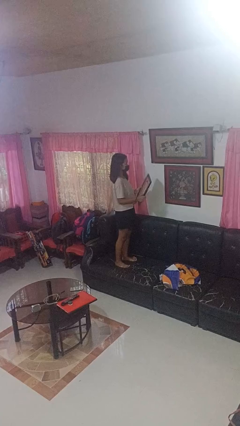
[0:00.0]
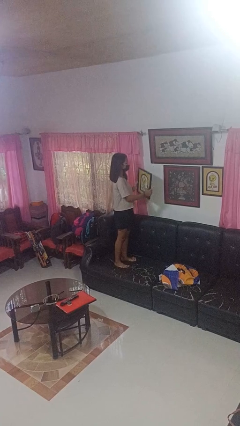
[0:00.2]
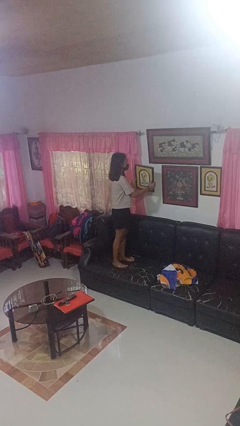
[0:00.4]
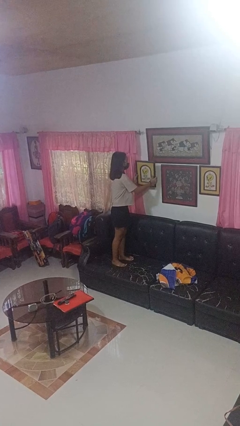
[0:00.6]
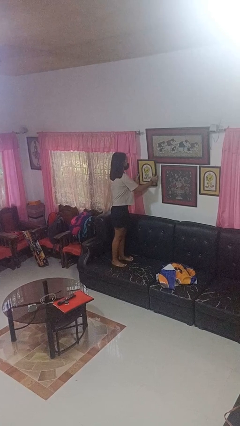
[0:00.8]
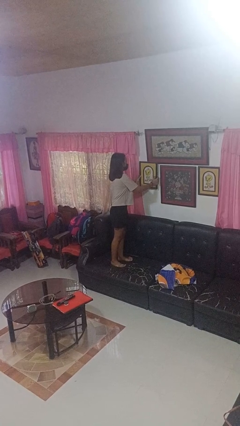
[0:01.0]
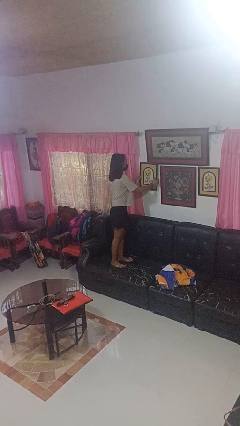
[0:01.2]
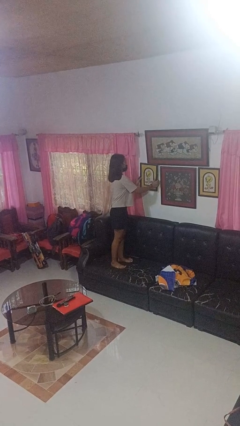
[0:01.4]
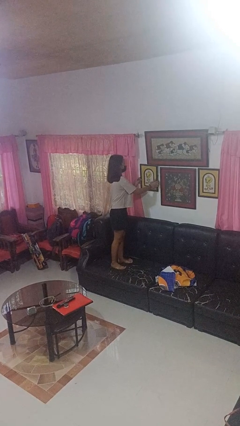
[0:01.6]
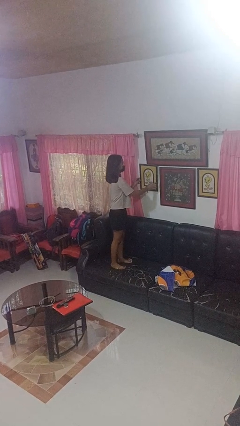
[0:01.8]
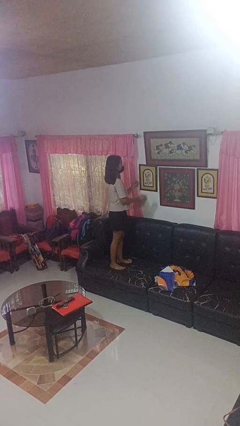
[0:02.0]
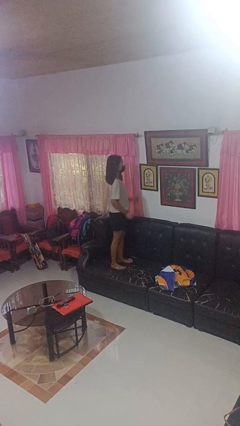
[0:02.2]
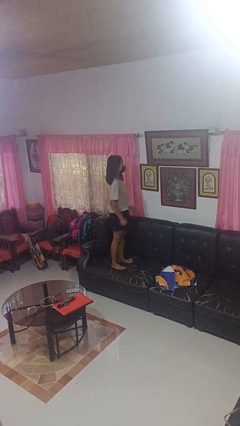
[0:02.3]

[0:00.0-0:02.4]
person puts up picture frame

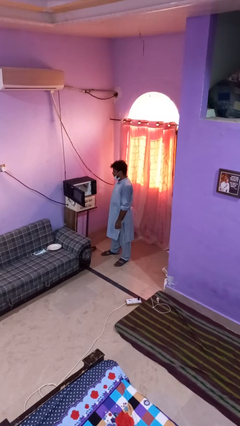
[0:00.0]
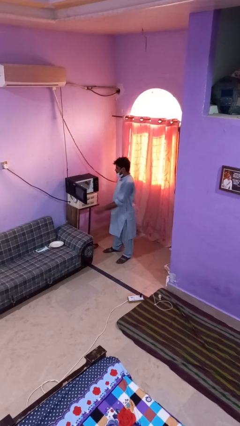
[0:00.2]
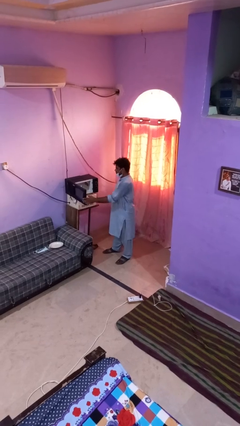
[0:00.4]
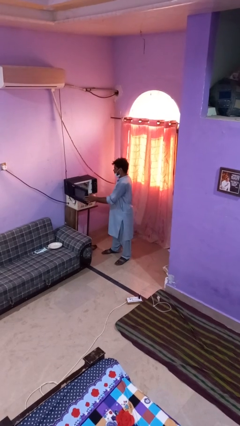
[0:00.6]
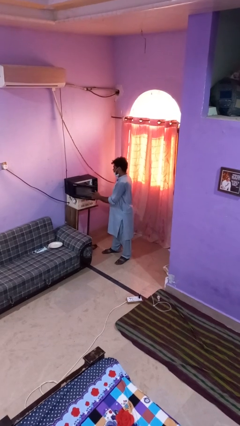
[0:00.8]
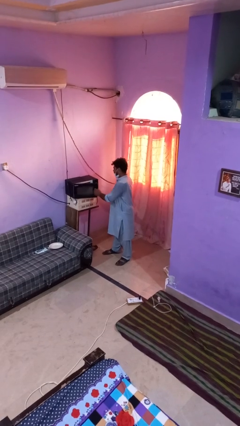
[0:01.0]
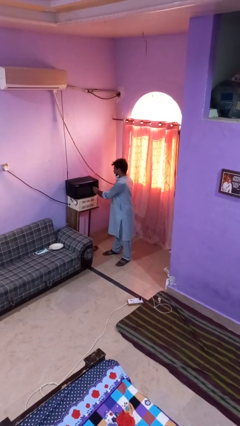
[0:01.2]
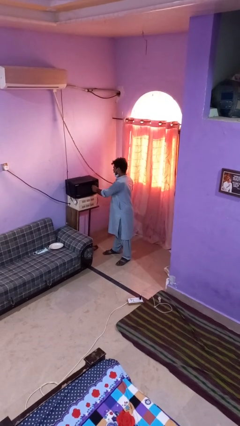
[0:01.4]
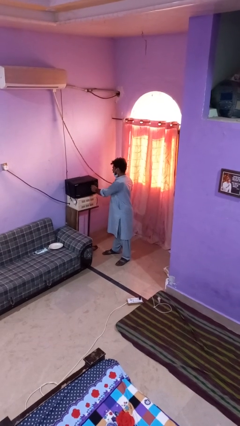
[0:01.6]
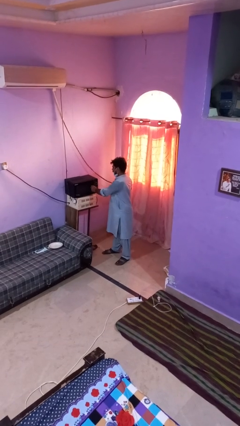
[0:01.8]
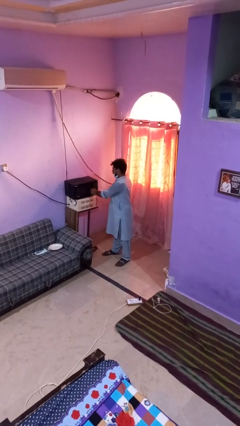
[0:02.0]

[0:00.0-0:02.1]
person closes oven door

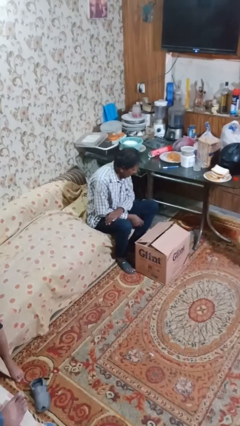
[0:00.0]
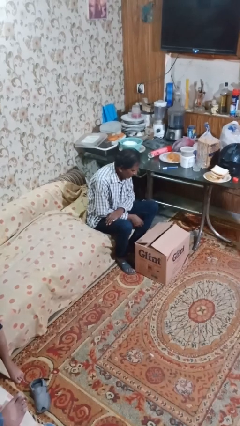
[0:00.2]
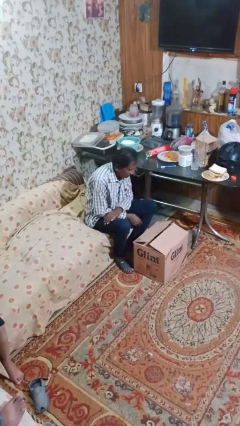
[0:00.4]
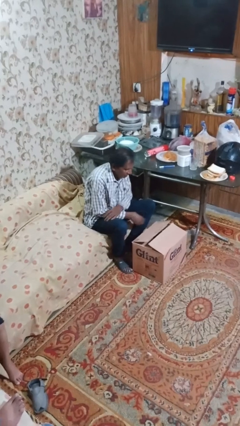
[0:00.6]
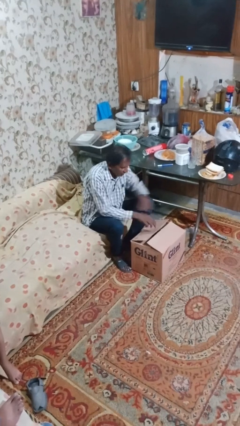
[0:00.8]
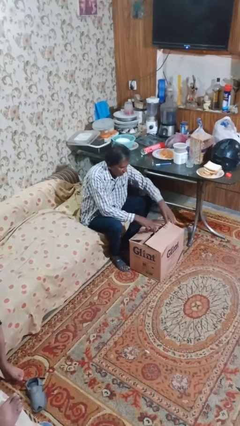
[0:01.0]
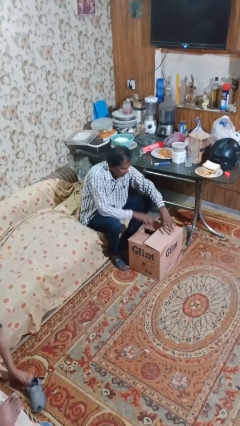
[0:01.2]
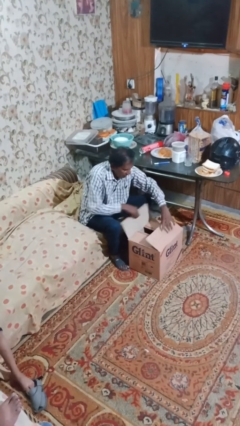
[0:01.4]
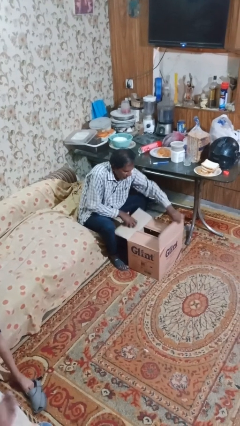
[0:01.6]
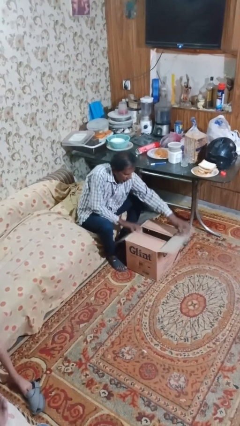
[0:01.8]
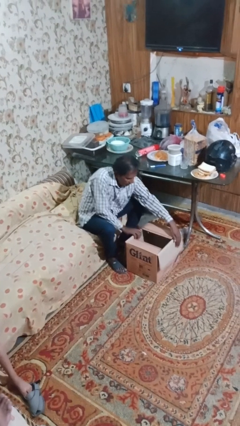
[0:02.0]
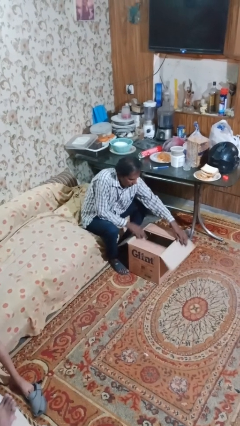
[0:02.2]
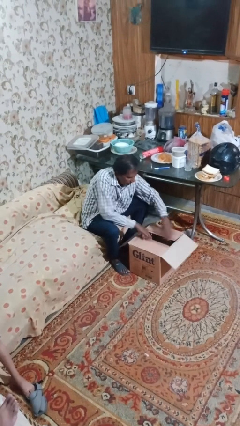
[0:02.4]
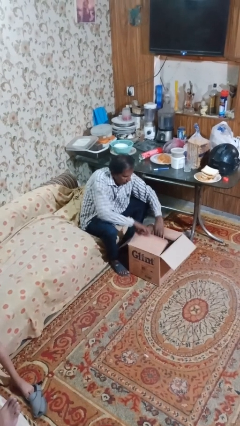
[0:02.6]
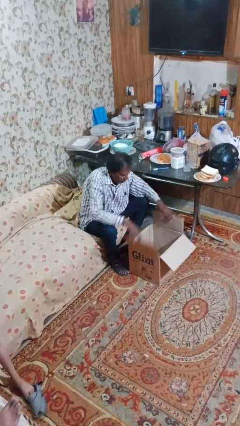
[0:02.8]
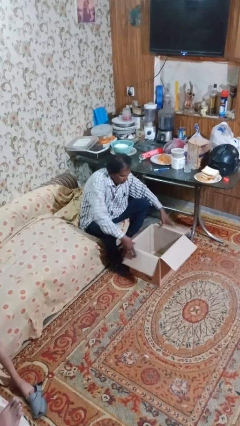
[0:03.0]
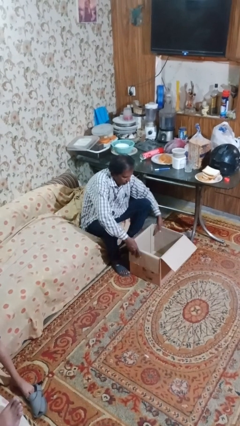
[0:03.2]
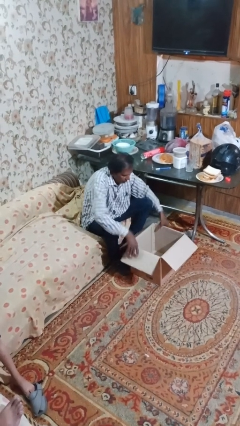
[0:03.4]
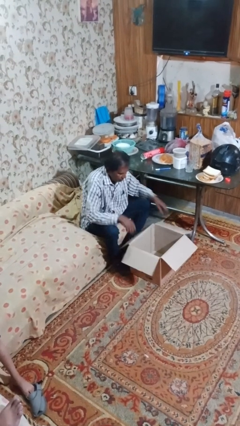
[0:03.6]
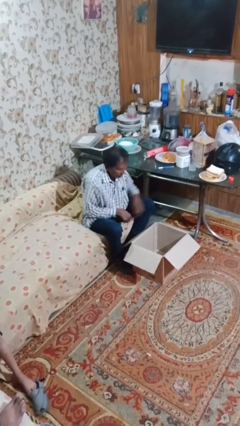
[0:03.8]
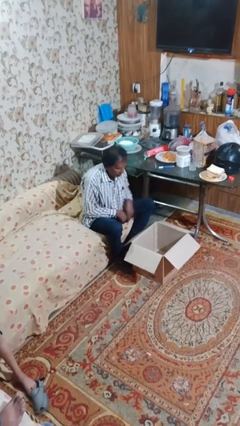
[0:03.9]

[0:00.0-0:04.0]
person opens box

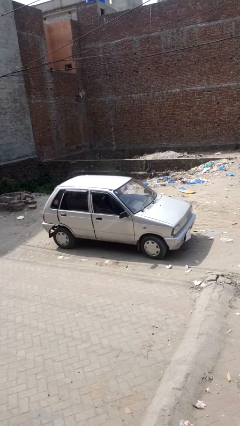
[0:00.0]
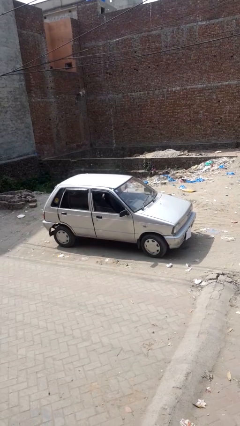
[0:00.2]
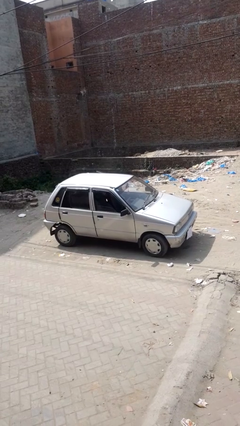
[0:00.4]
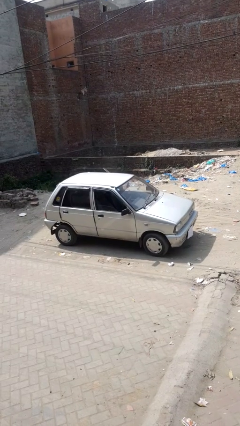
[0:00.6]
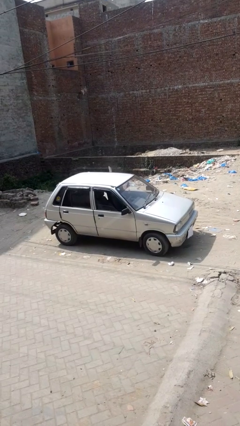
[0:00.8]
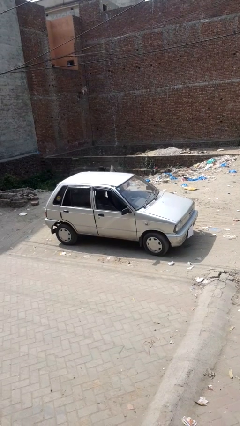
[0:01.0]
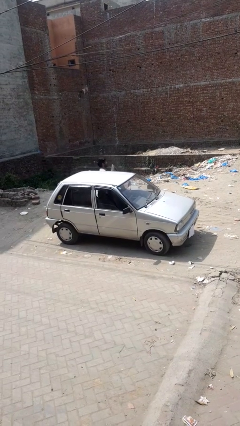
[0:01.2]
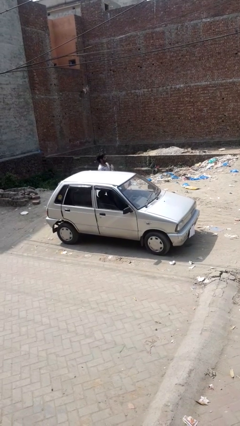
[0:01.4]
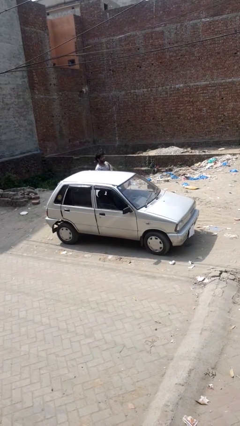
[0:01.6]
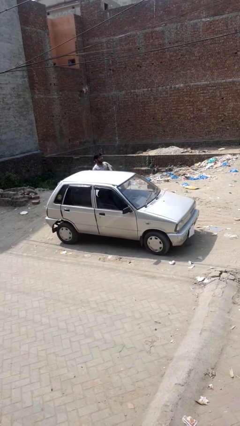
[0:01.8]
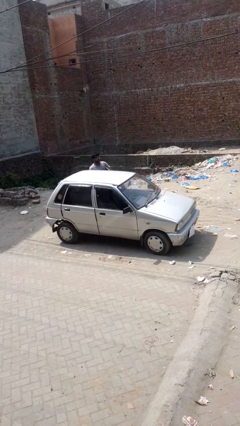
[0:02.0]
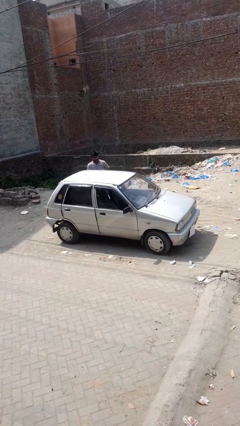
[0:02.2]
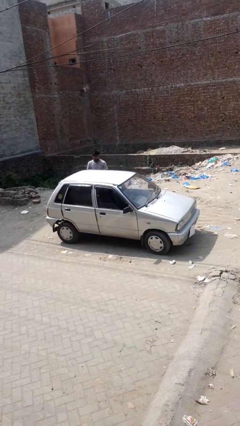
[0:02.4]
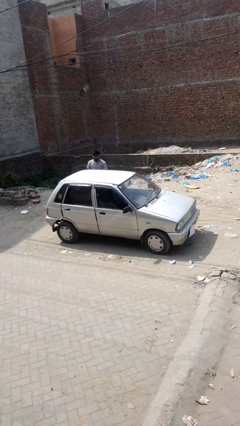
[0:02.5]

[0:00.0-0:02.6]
car drops off person

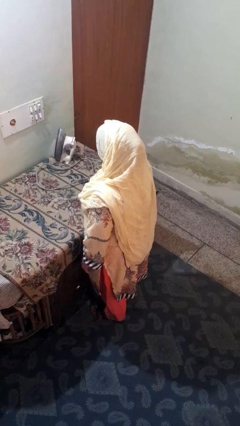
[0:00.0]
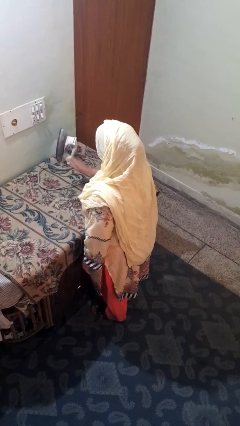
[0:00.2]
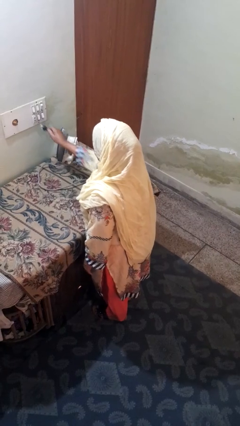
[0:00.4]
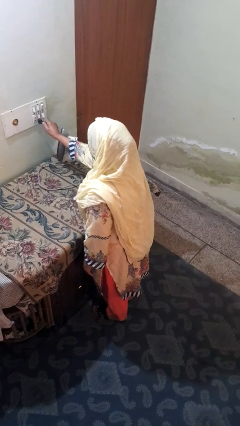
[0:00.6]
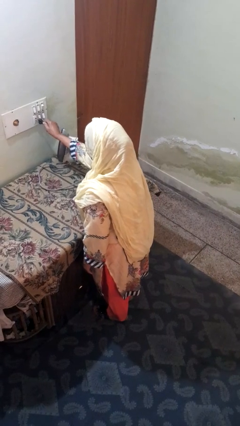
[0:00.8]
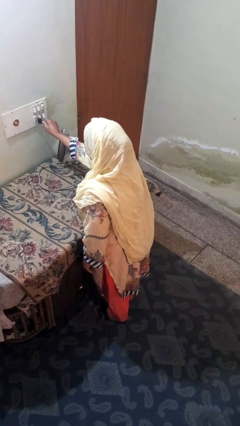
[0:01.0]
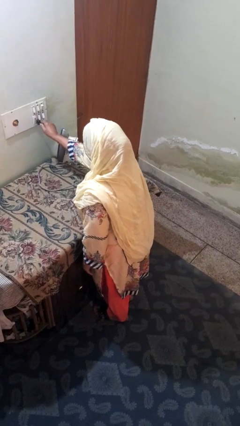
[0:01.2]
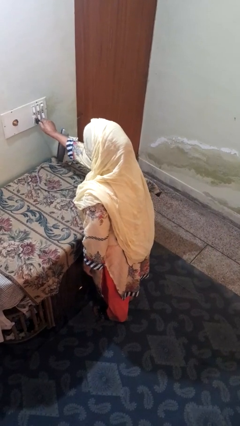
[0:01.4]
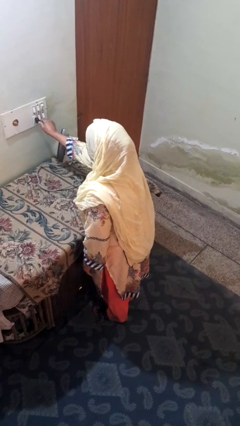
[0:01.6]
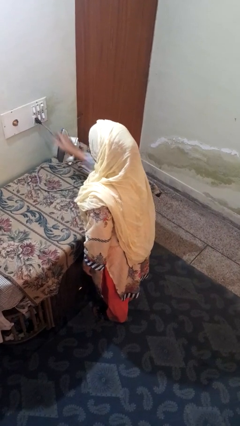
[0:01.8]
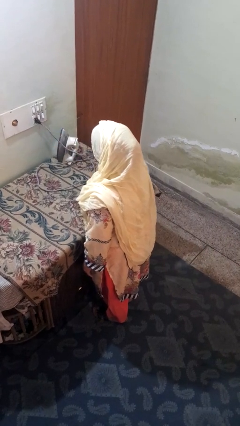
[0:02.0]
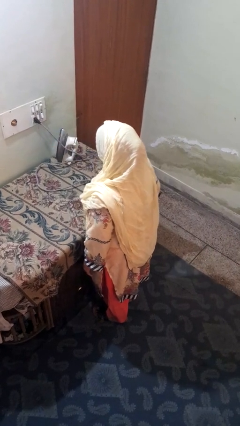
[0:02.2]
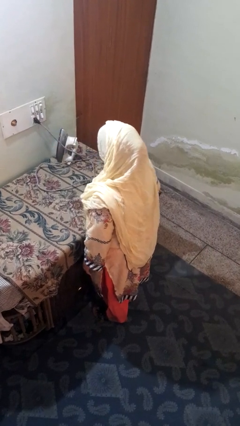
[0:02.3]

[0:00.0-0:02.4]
person plugs into electrical socket

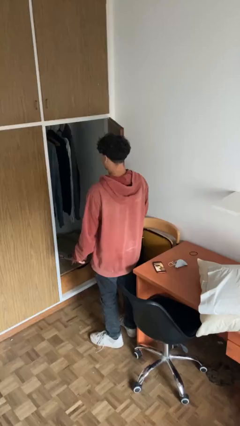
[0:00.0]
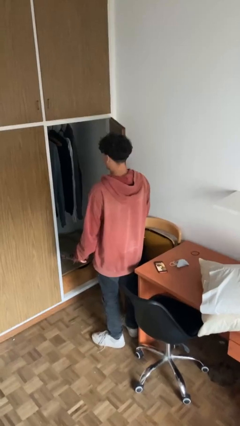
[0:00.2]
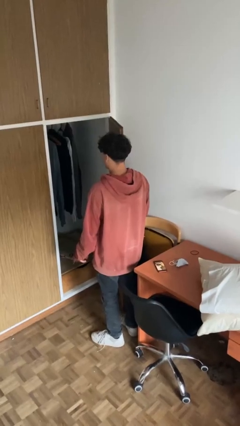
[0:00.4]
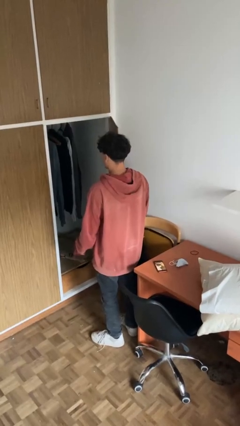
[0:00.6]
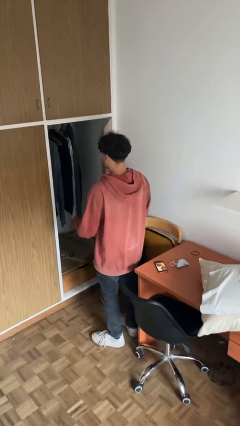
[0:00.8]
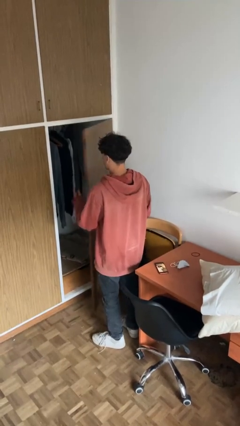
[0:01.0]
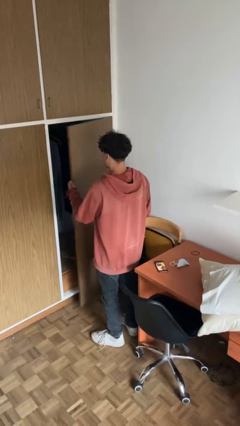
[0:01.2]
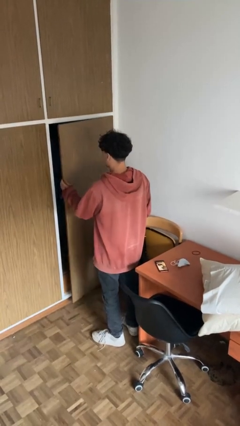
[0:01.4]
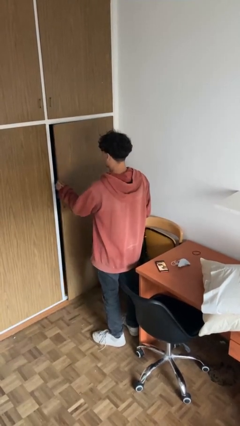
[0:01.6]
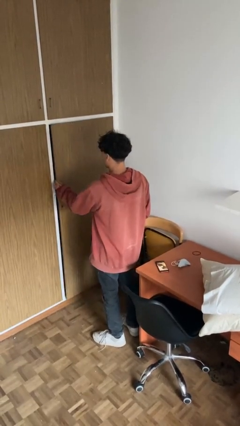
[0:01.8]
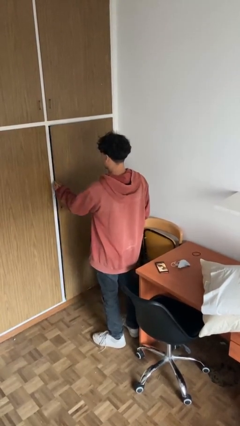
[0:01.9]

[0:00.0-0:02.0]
person closes closet door

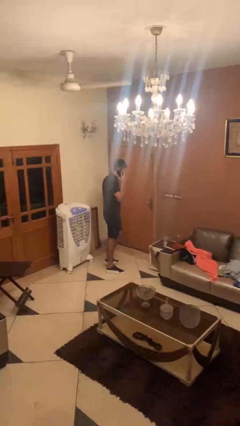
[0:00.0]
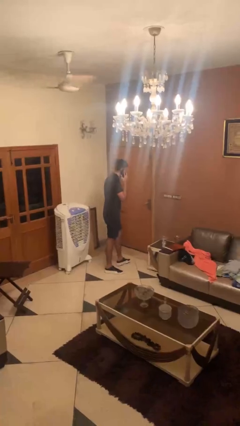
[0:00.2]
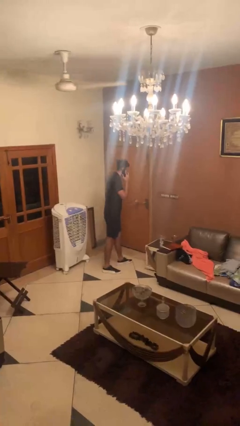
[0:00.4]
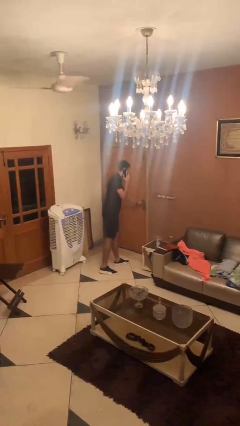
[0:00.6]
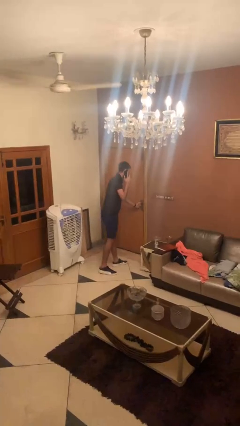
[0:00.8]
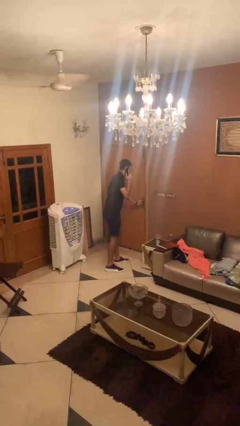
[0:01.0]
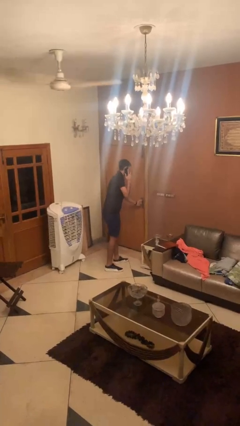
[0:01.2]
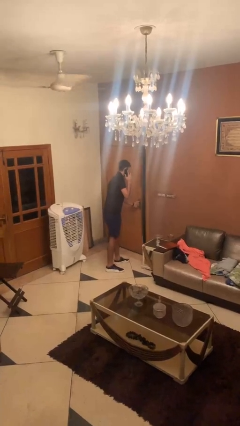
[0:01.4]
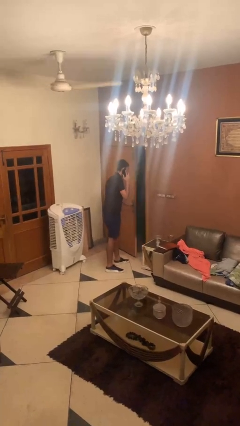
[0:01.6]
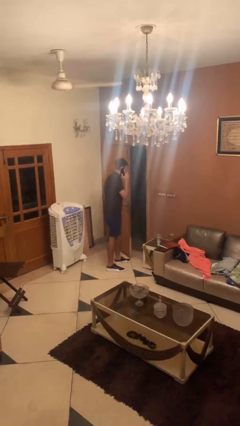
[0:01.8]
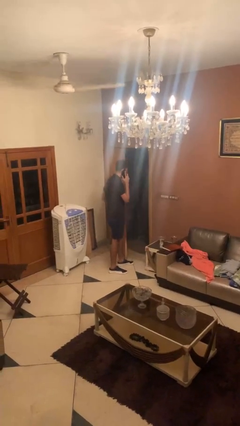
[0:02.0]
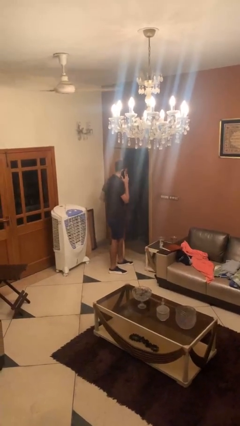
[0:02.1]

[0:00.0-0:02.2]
person opens facility door
